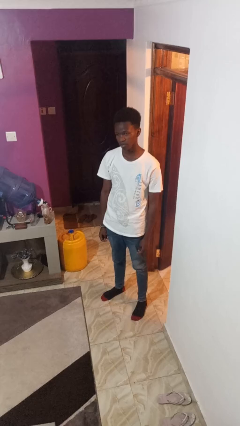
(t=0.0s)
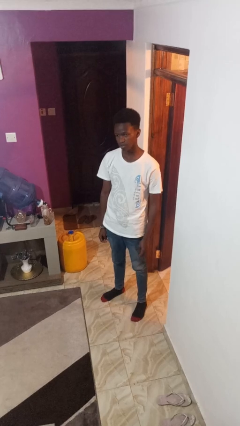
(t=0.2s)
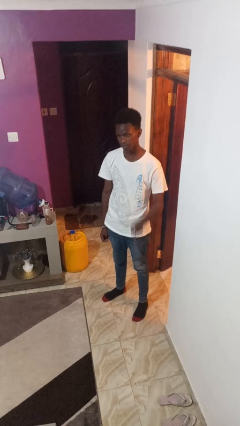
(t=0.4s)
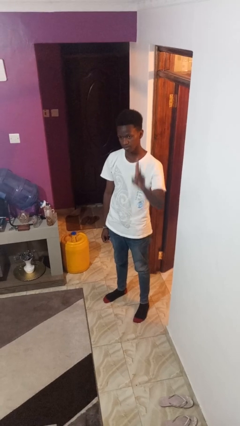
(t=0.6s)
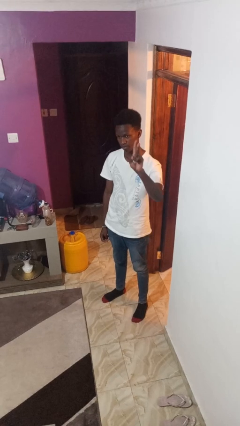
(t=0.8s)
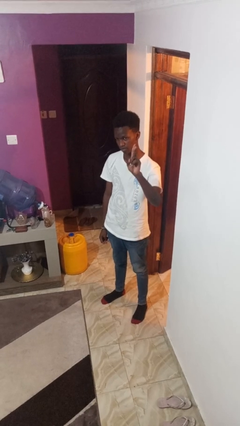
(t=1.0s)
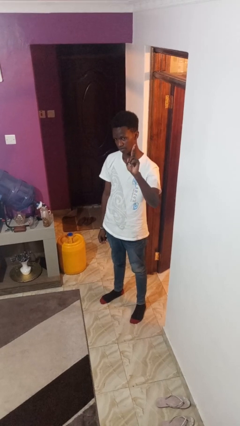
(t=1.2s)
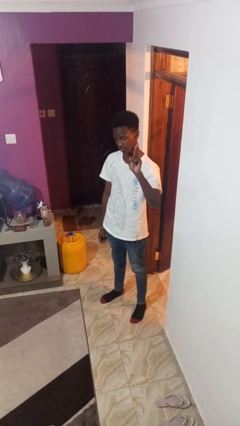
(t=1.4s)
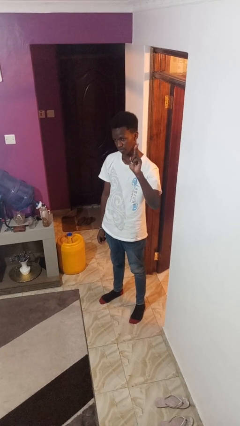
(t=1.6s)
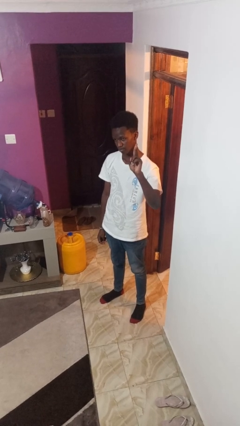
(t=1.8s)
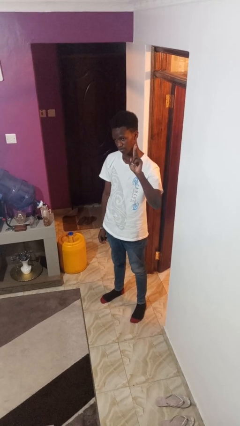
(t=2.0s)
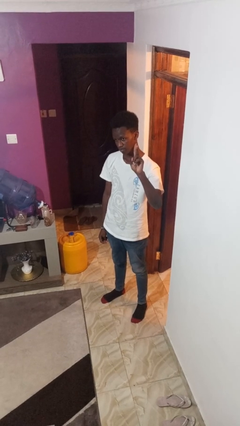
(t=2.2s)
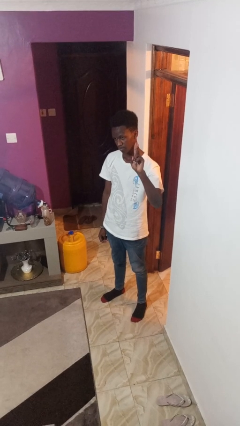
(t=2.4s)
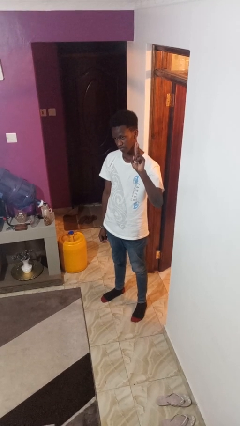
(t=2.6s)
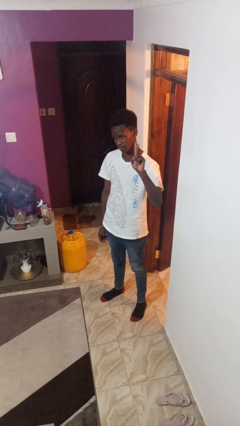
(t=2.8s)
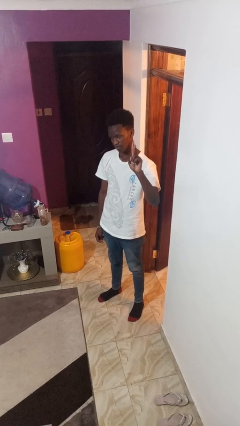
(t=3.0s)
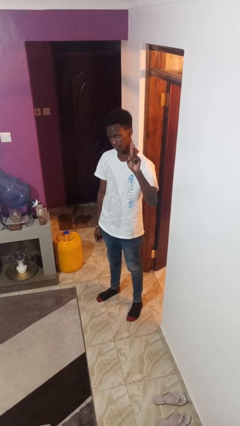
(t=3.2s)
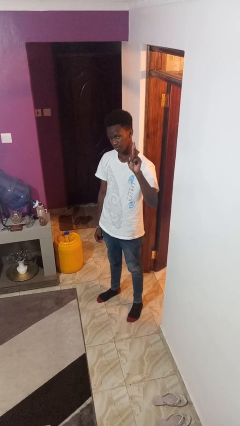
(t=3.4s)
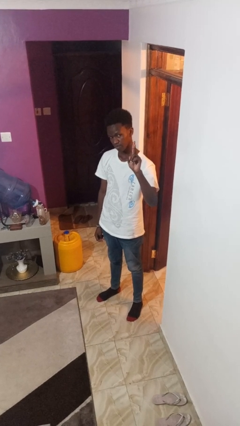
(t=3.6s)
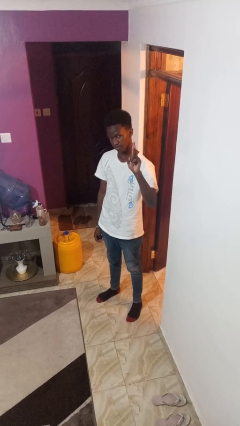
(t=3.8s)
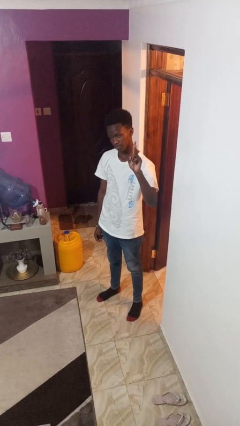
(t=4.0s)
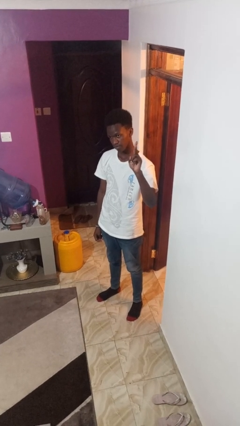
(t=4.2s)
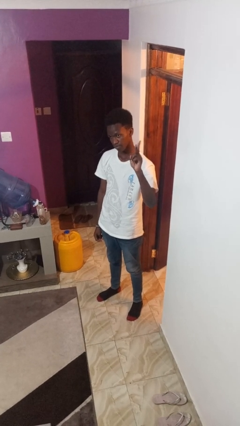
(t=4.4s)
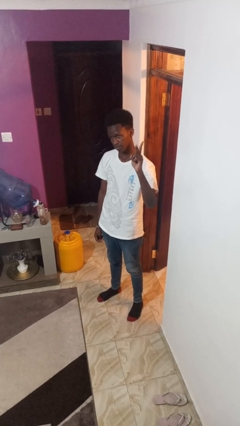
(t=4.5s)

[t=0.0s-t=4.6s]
person gestures peace

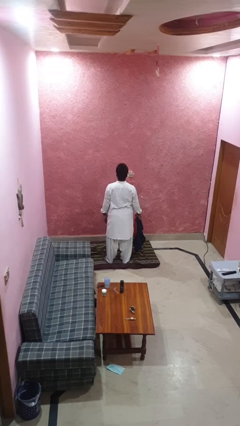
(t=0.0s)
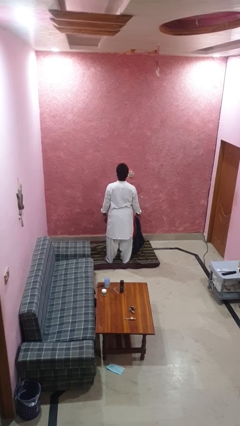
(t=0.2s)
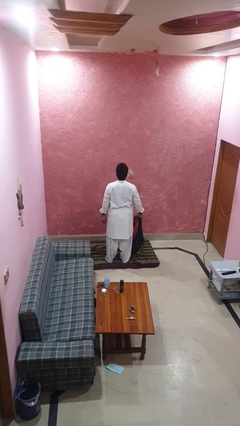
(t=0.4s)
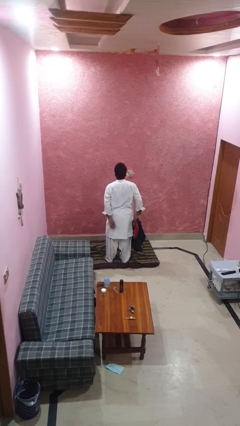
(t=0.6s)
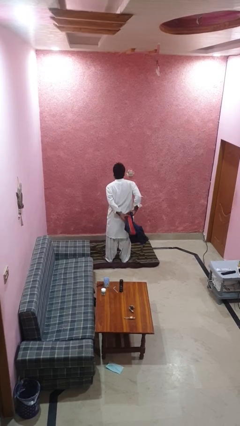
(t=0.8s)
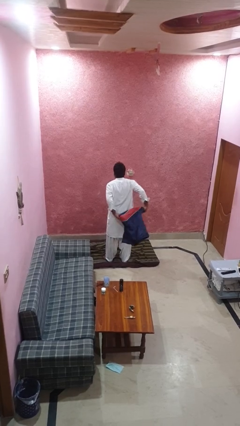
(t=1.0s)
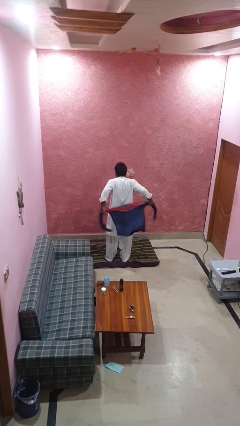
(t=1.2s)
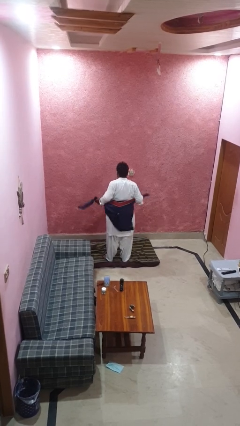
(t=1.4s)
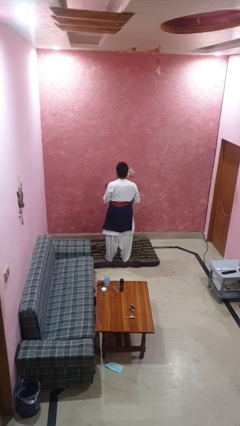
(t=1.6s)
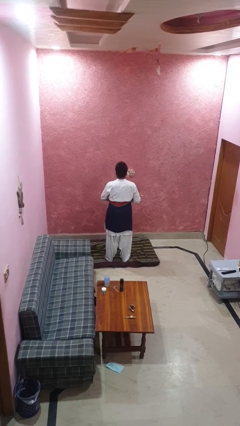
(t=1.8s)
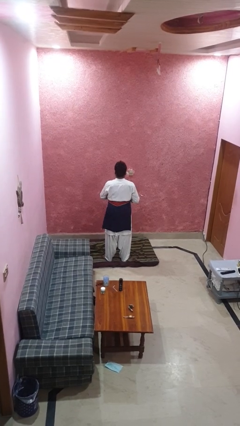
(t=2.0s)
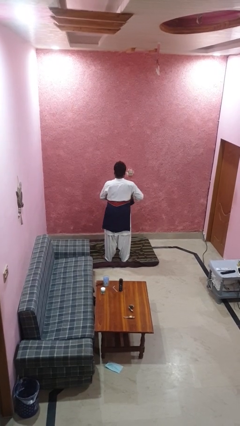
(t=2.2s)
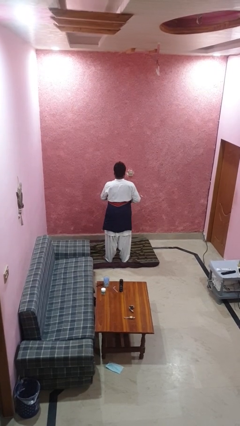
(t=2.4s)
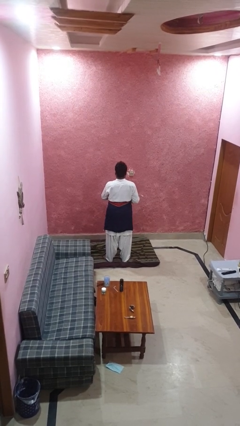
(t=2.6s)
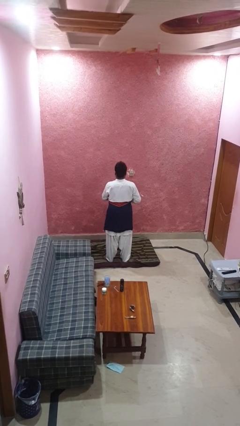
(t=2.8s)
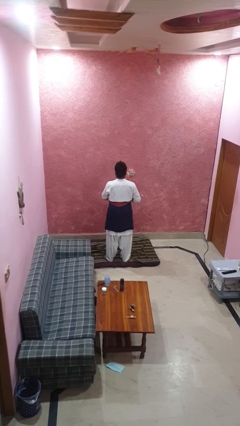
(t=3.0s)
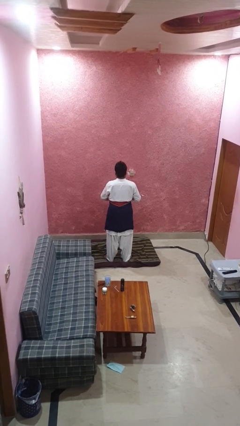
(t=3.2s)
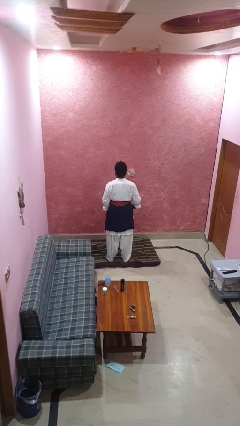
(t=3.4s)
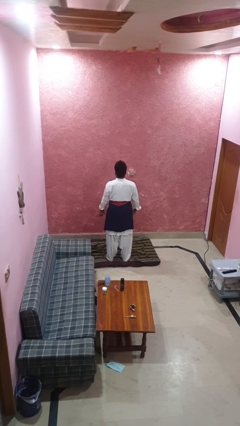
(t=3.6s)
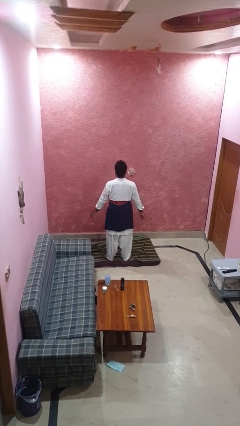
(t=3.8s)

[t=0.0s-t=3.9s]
person ties jacket around waist

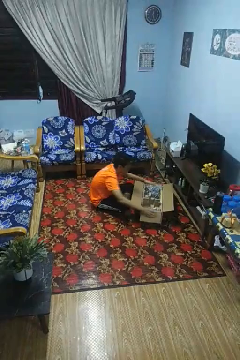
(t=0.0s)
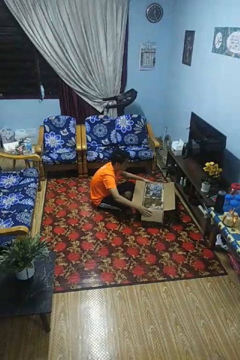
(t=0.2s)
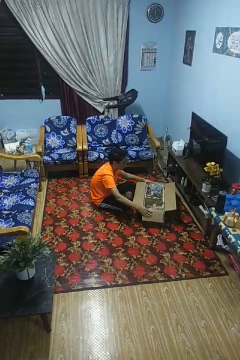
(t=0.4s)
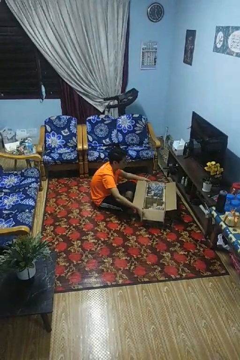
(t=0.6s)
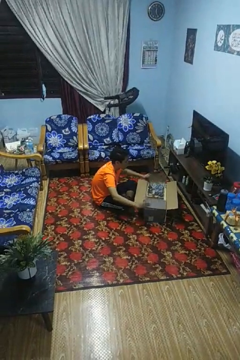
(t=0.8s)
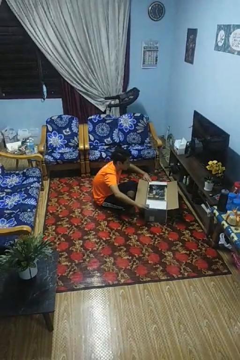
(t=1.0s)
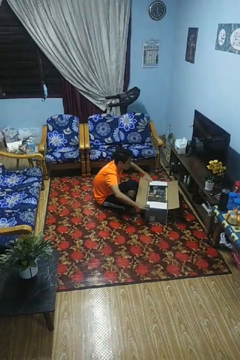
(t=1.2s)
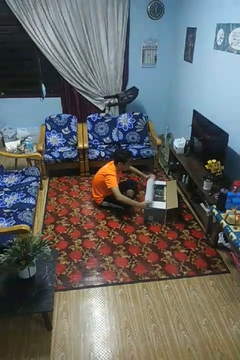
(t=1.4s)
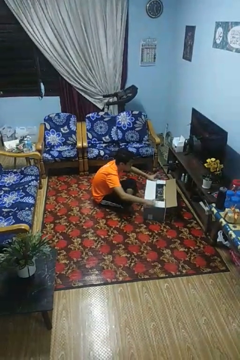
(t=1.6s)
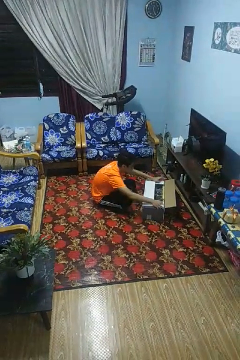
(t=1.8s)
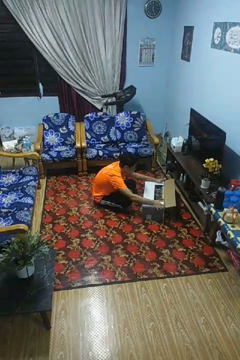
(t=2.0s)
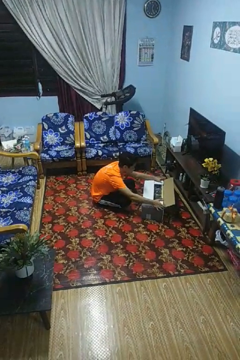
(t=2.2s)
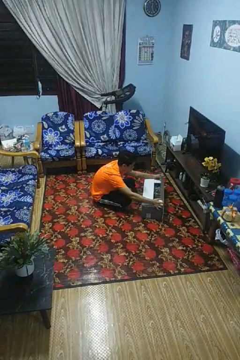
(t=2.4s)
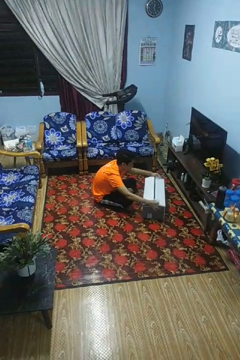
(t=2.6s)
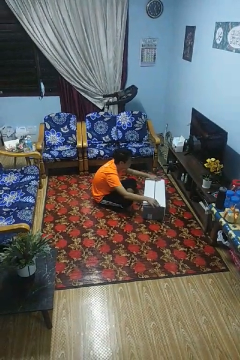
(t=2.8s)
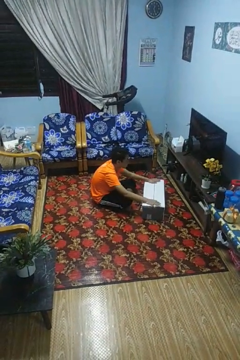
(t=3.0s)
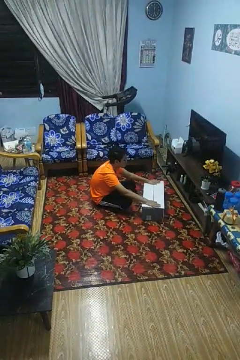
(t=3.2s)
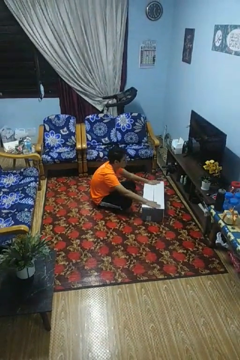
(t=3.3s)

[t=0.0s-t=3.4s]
person closes box

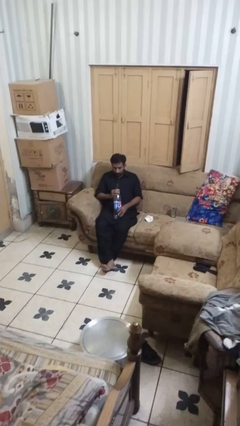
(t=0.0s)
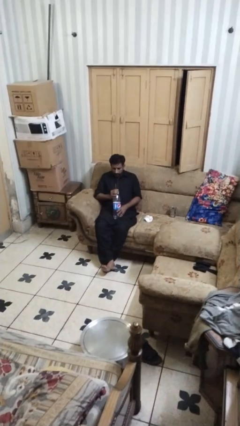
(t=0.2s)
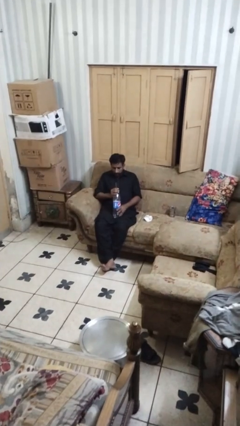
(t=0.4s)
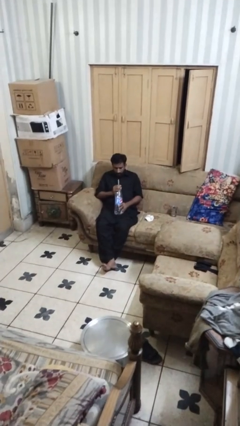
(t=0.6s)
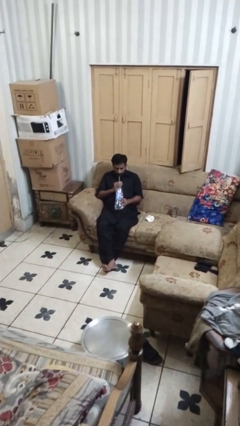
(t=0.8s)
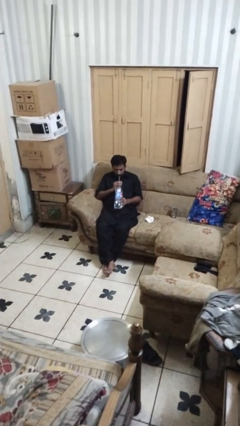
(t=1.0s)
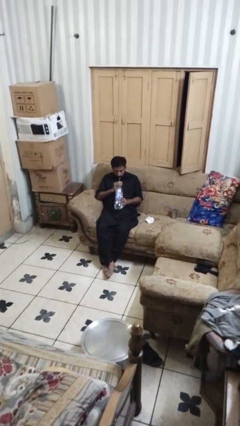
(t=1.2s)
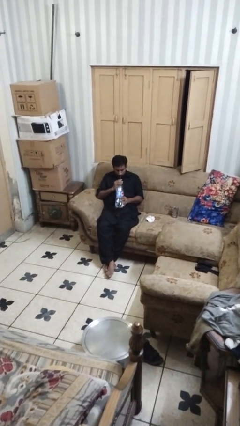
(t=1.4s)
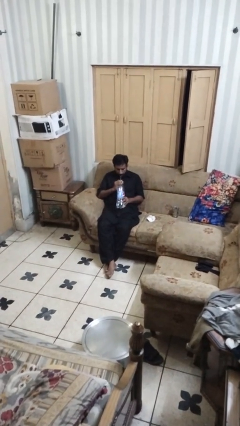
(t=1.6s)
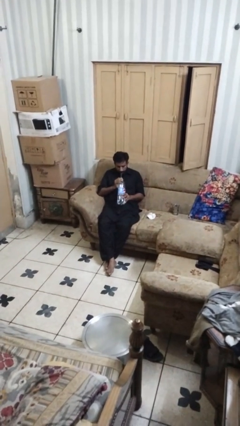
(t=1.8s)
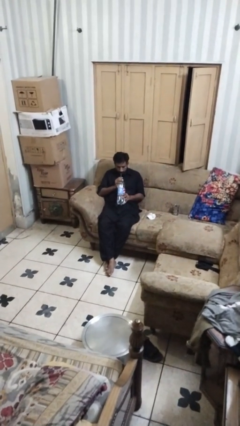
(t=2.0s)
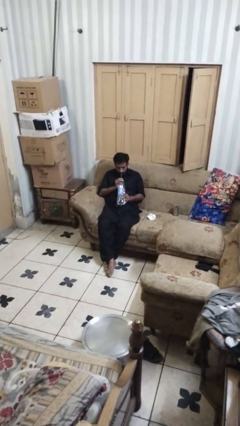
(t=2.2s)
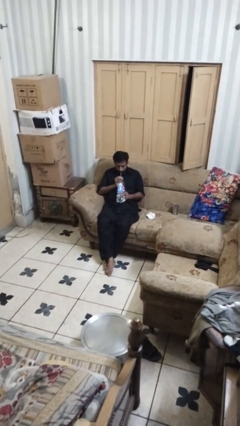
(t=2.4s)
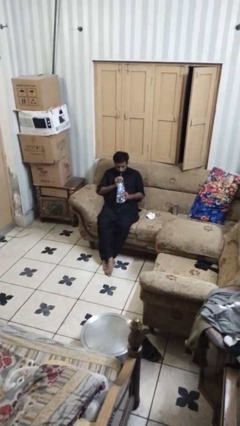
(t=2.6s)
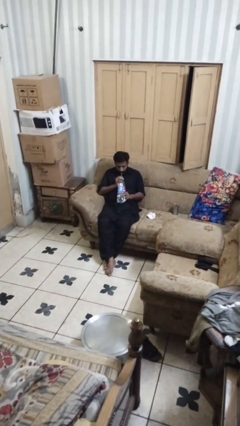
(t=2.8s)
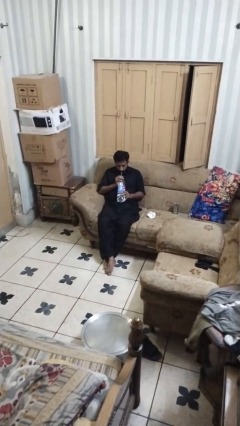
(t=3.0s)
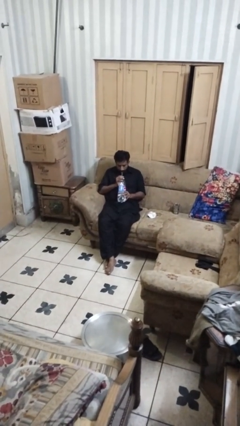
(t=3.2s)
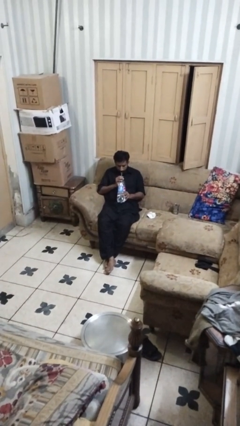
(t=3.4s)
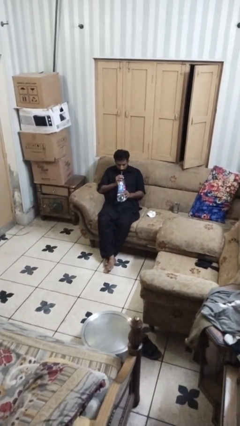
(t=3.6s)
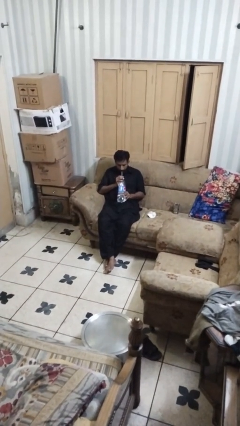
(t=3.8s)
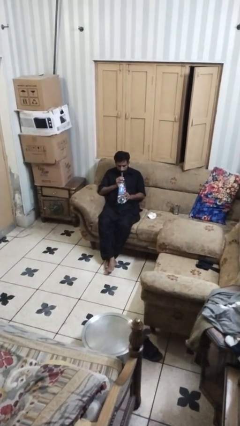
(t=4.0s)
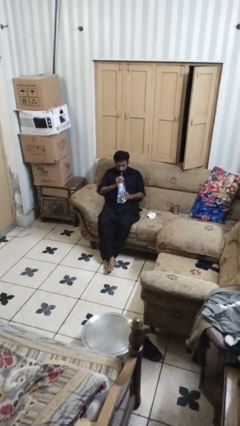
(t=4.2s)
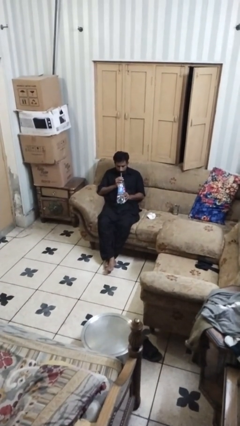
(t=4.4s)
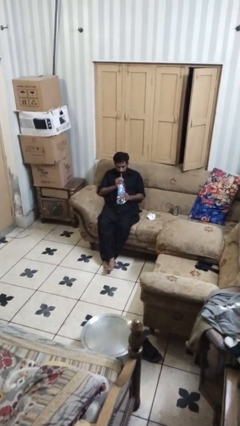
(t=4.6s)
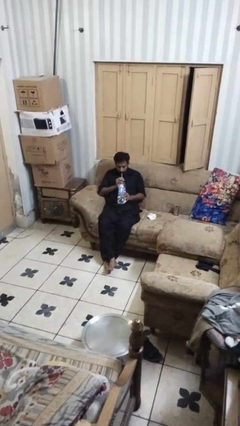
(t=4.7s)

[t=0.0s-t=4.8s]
person drinks from straw

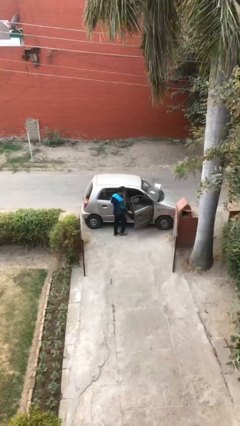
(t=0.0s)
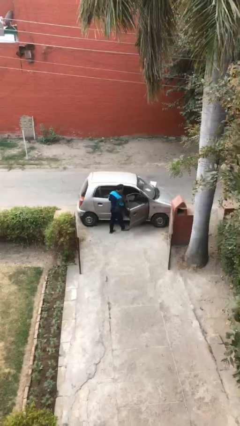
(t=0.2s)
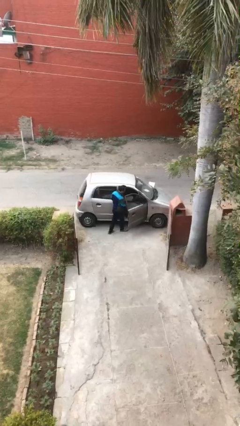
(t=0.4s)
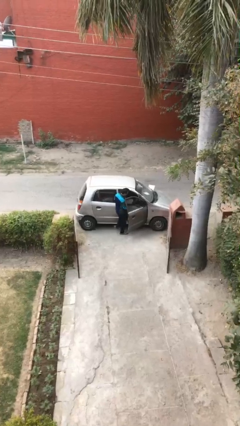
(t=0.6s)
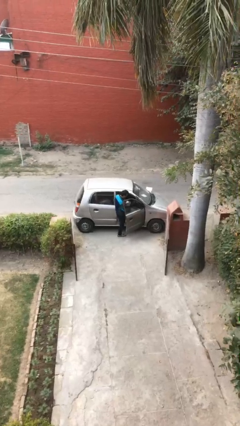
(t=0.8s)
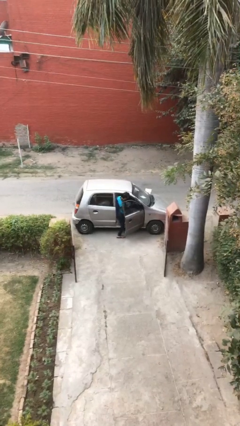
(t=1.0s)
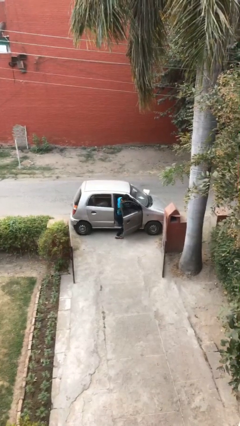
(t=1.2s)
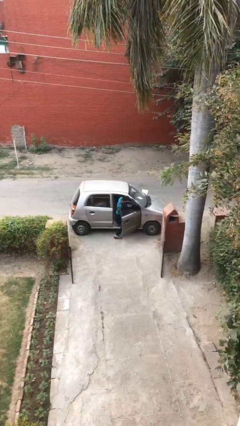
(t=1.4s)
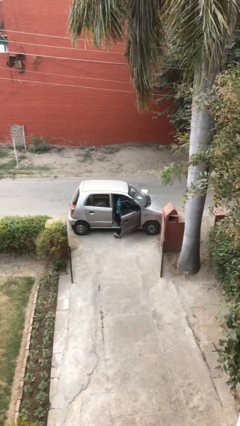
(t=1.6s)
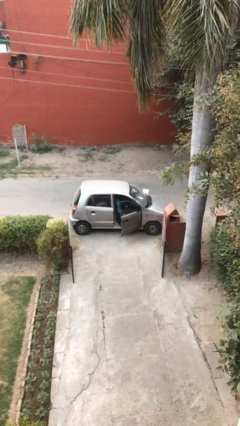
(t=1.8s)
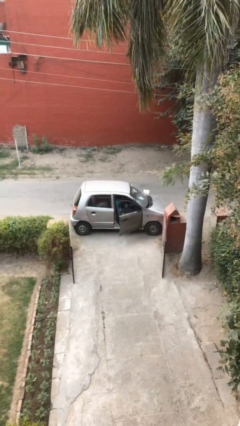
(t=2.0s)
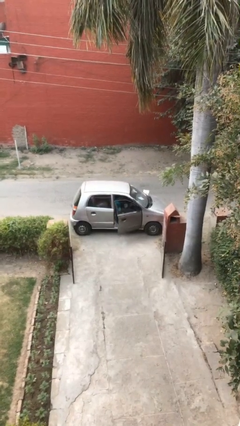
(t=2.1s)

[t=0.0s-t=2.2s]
person enters car
